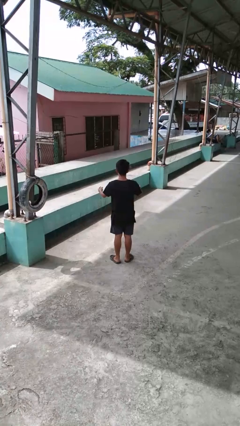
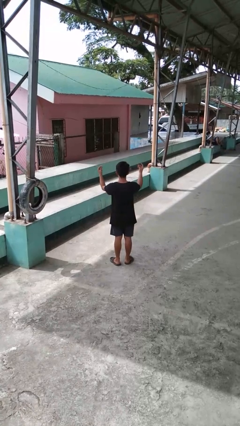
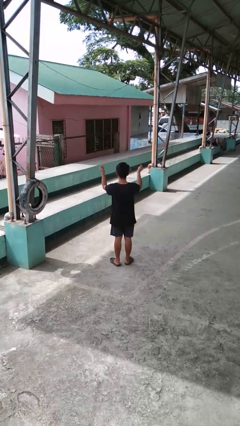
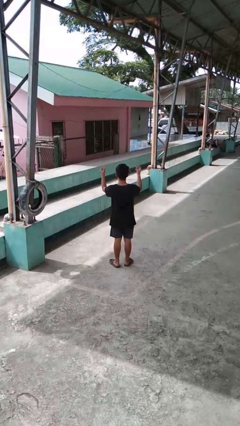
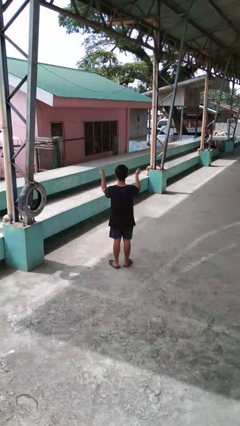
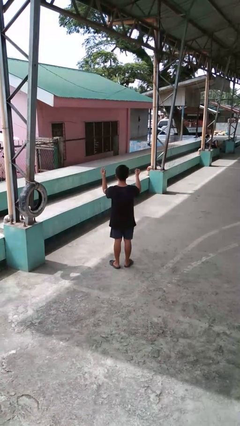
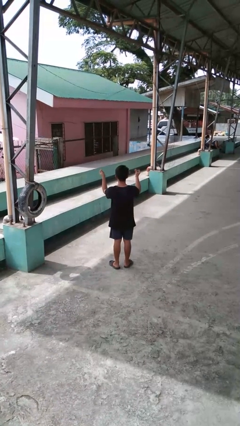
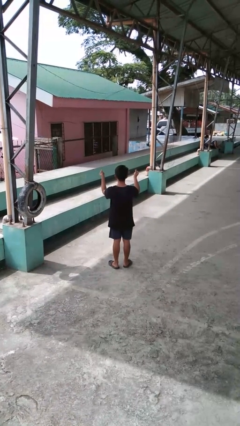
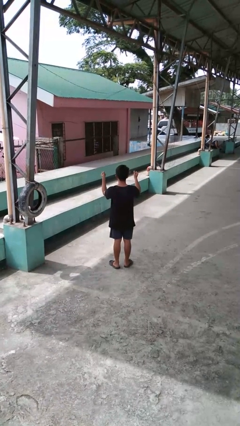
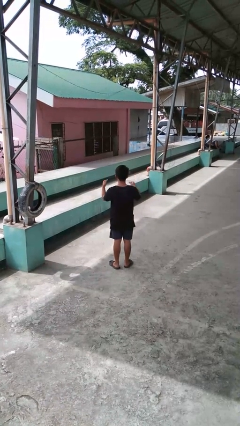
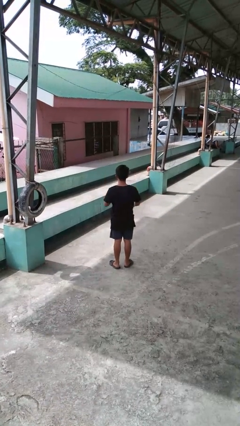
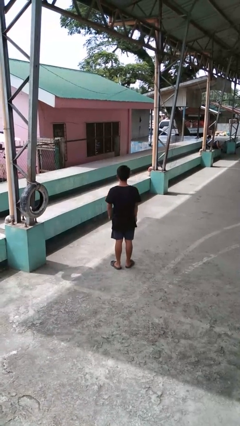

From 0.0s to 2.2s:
person snaps fingers

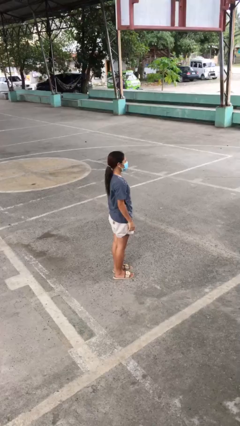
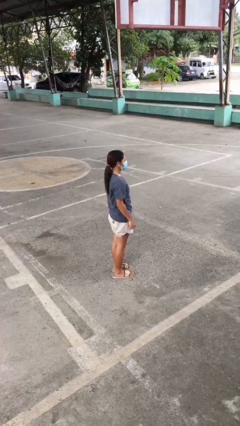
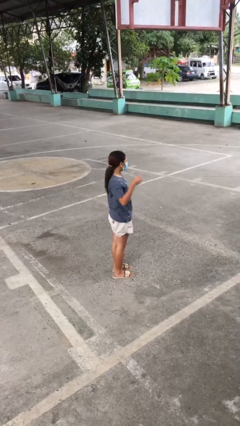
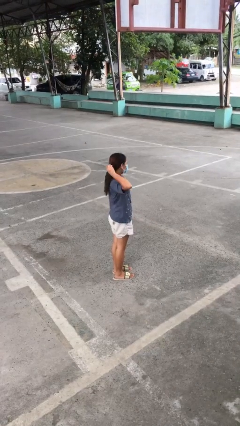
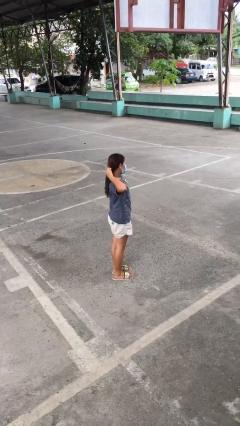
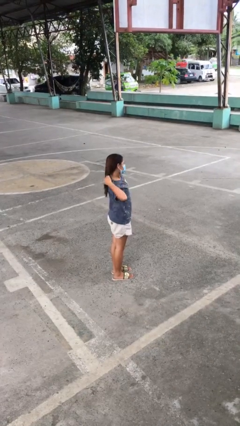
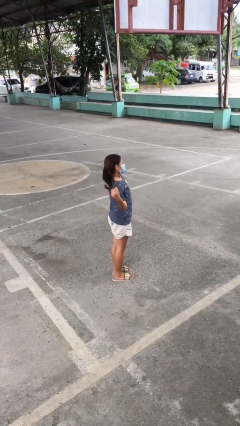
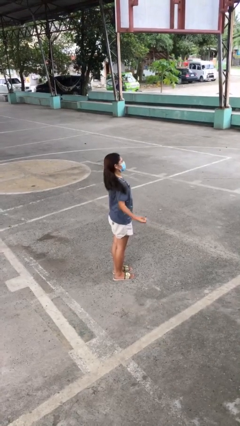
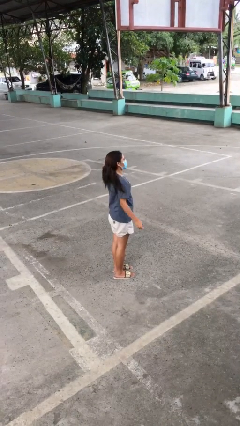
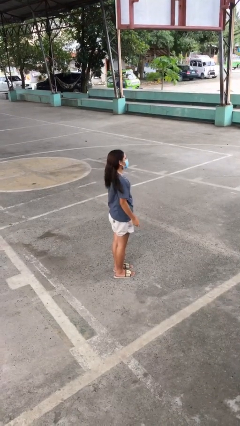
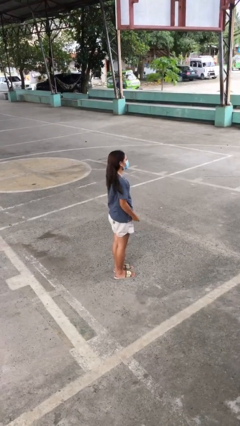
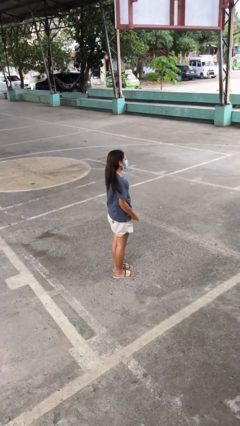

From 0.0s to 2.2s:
person takes off hairtie

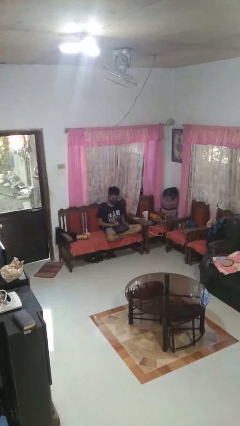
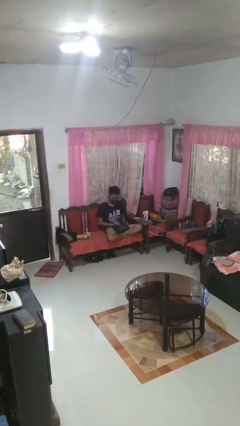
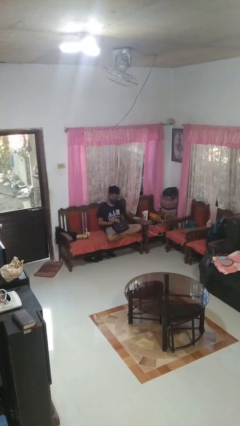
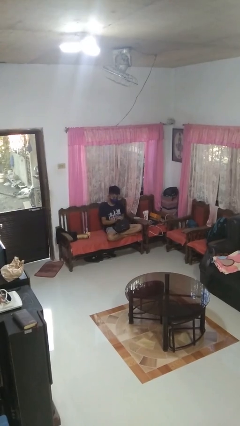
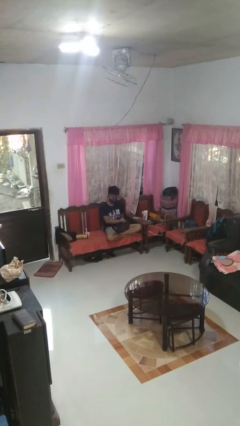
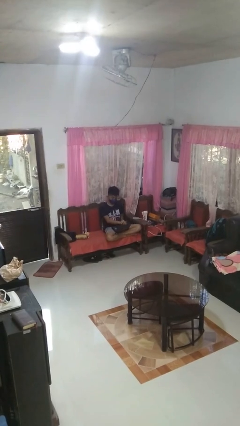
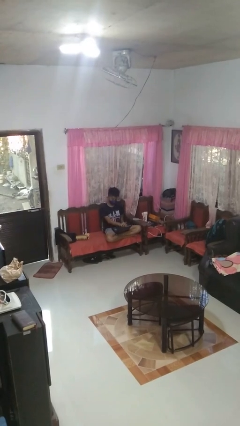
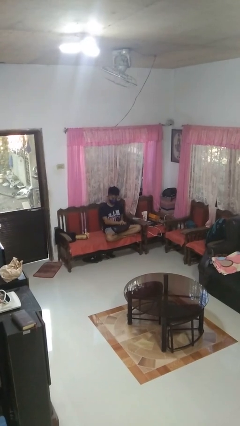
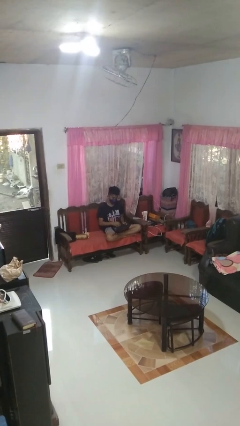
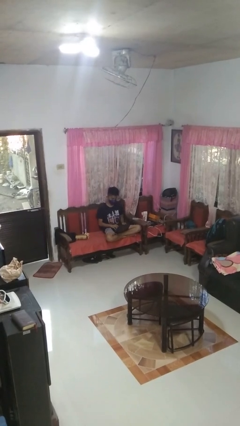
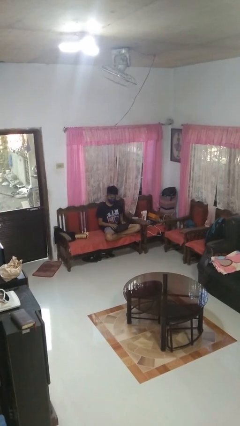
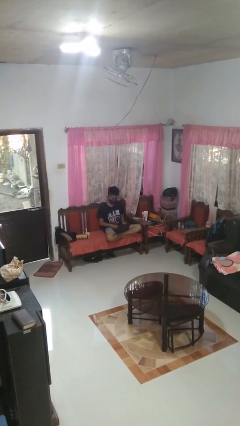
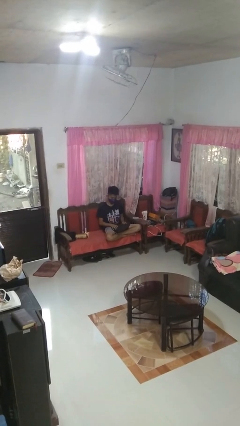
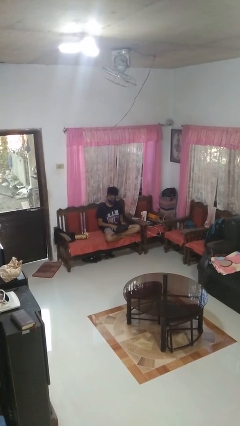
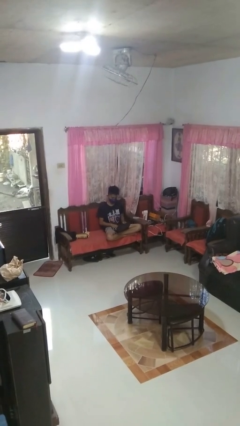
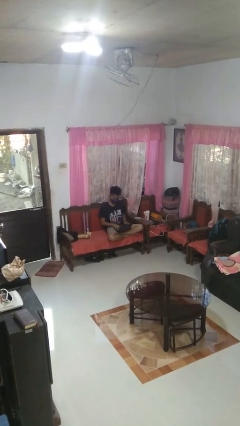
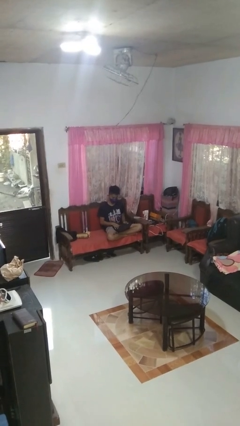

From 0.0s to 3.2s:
person opens laptop

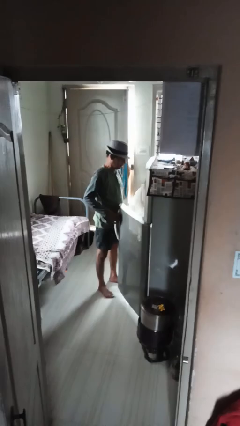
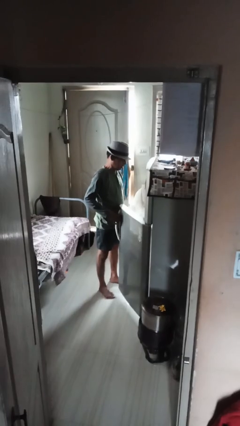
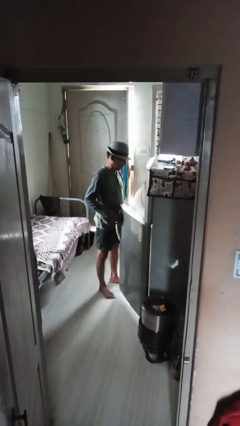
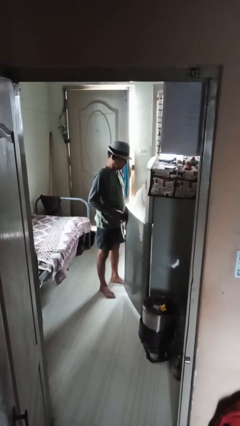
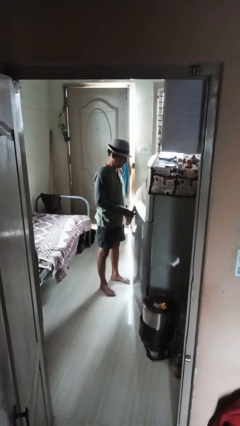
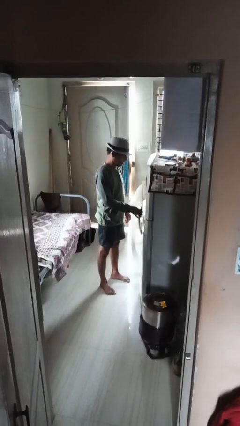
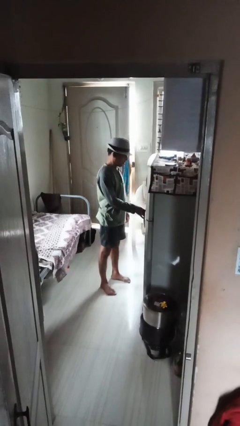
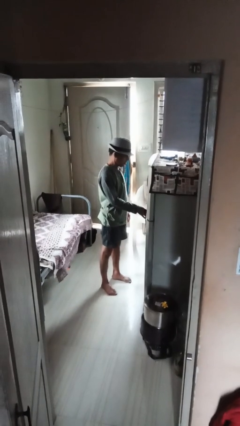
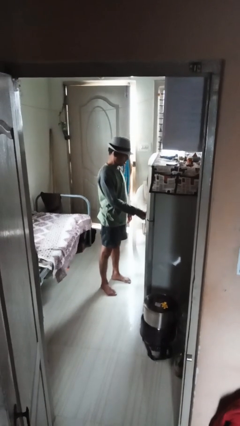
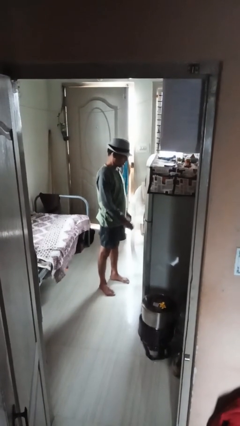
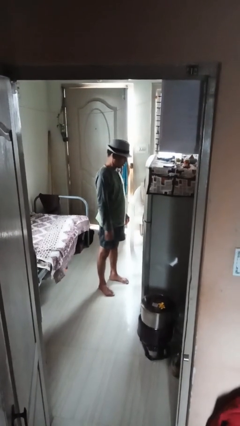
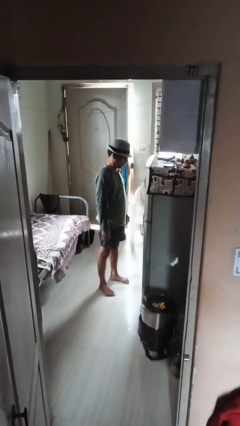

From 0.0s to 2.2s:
person closes refrigerator

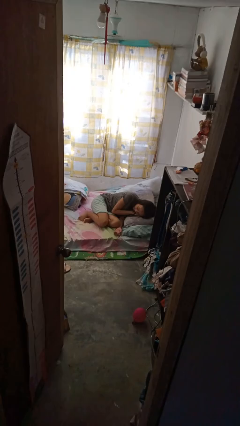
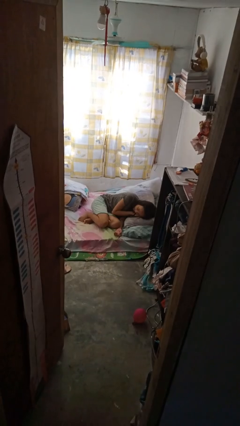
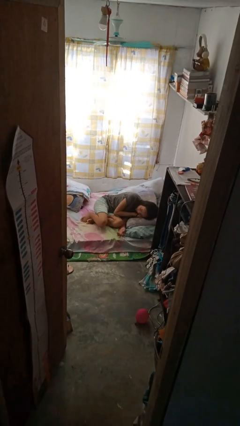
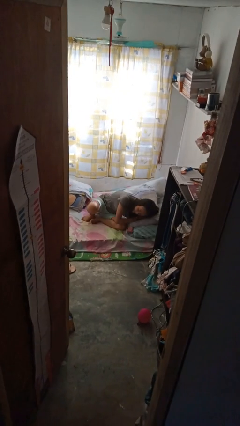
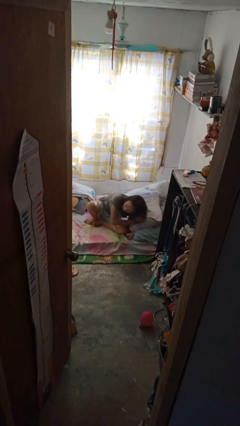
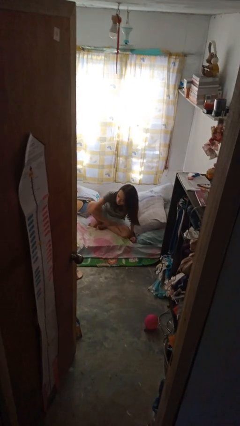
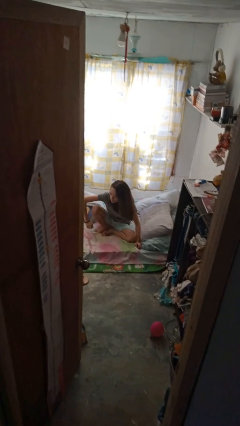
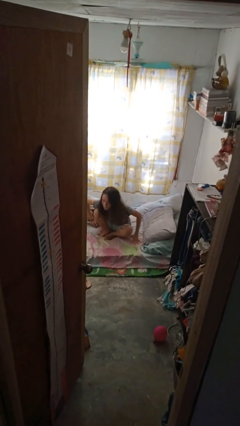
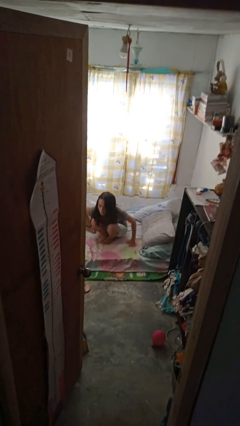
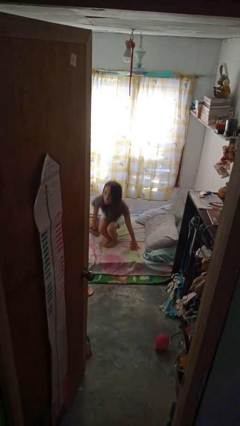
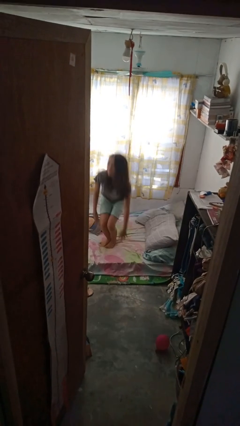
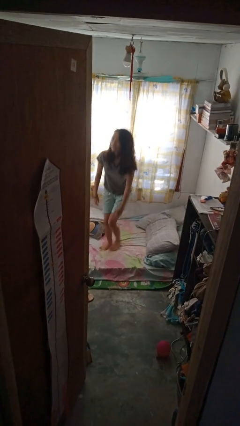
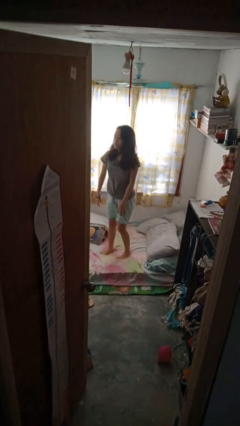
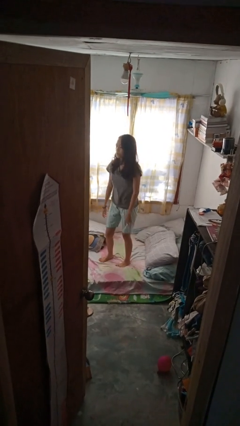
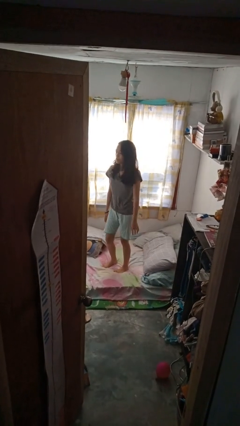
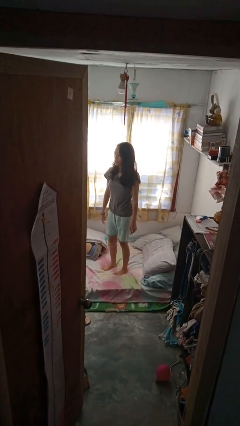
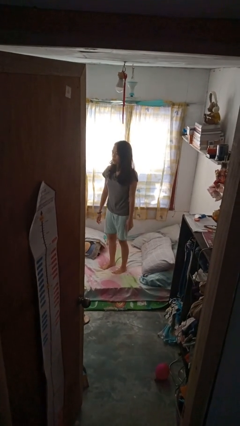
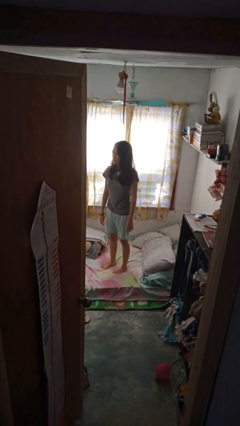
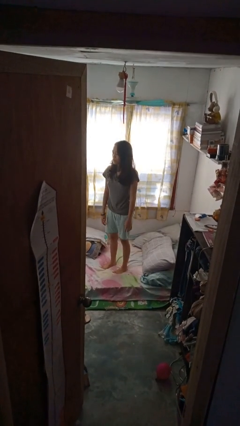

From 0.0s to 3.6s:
person stands up

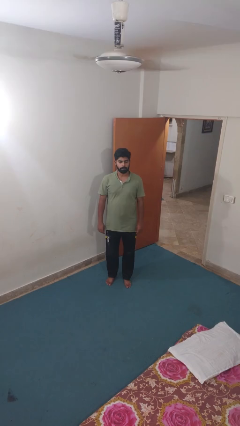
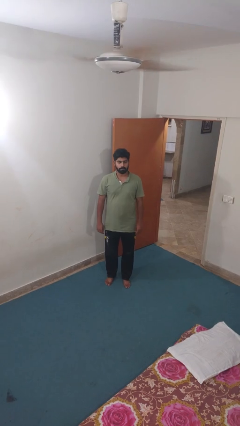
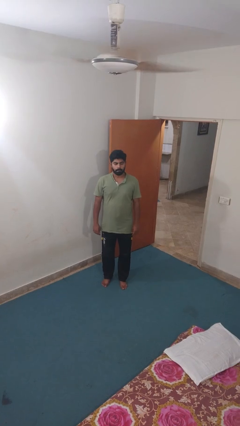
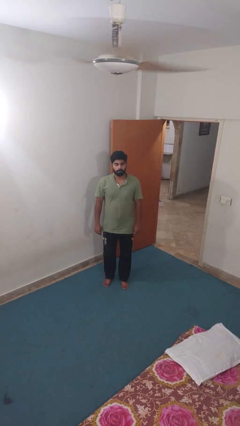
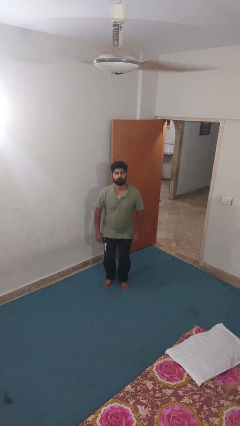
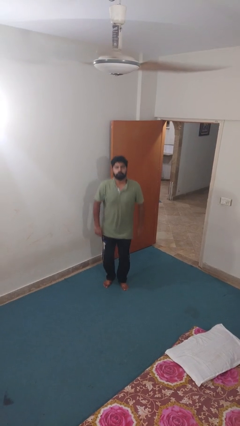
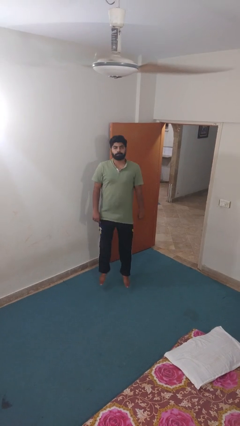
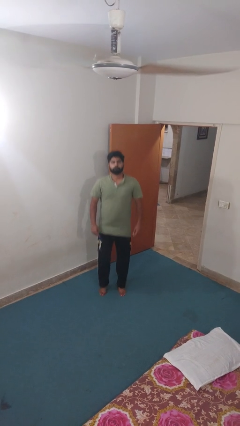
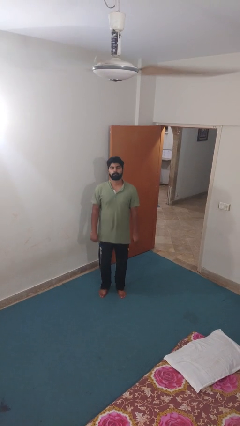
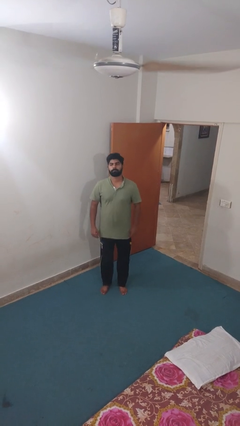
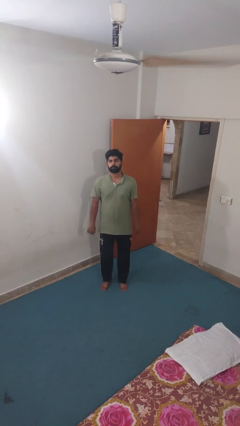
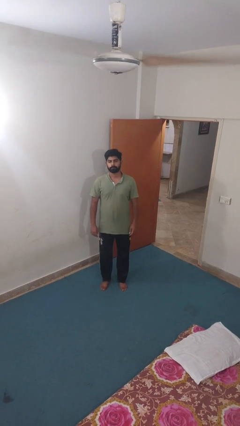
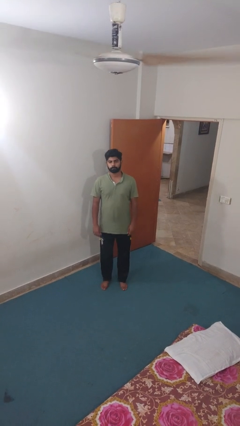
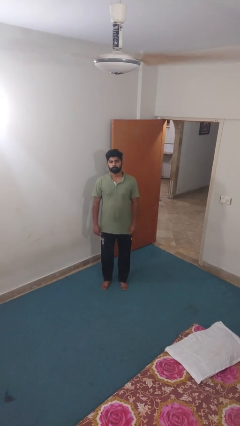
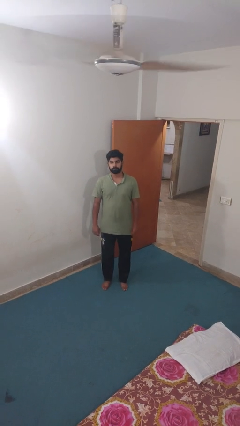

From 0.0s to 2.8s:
person jumps

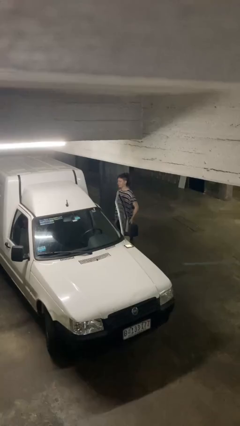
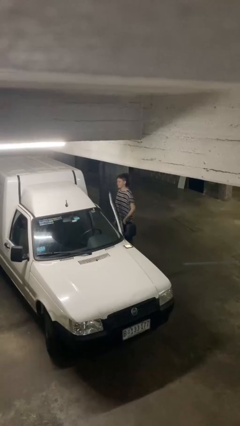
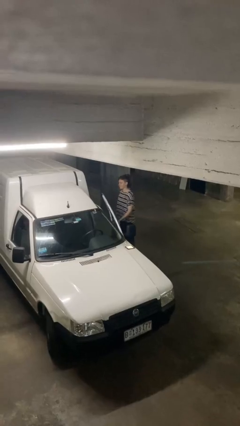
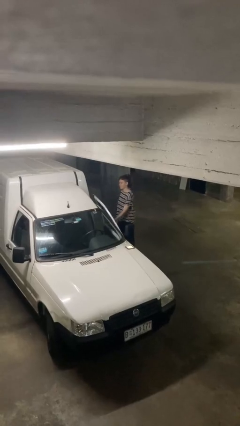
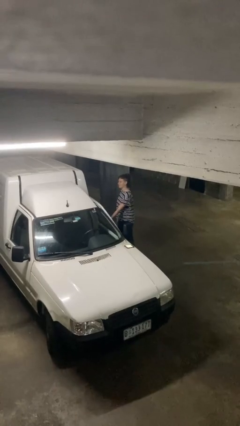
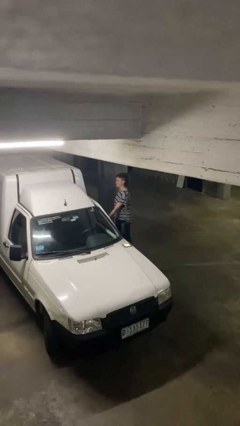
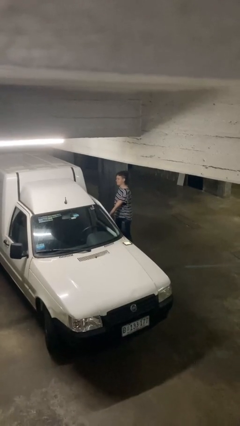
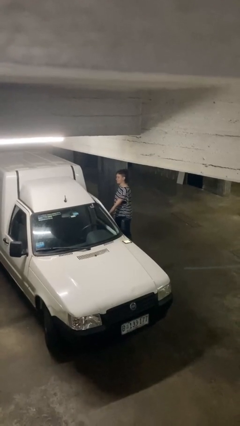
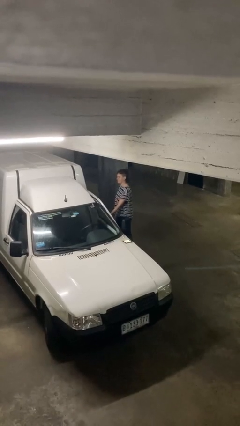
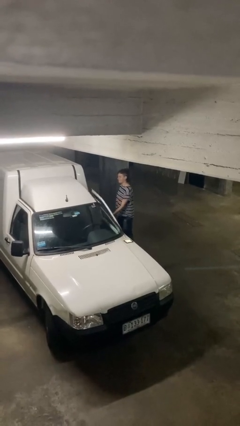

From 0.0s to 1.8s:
person closes car door
